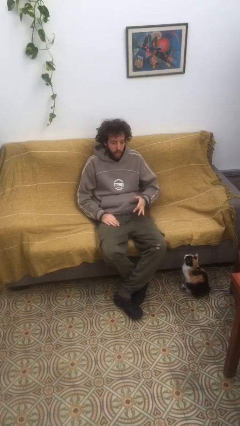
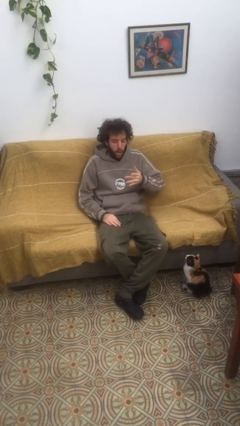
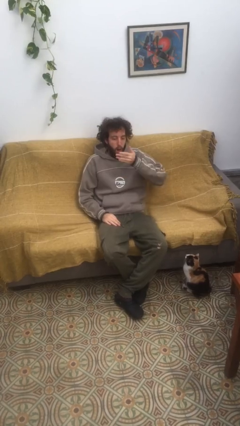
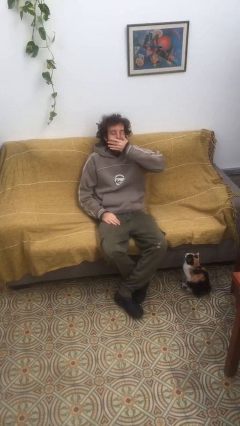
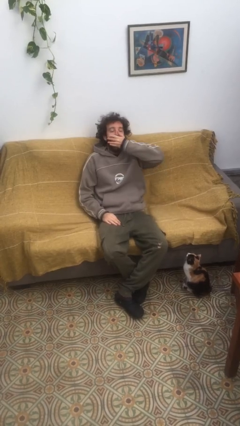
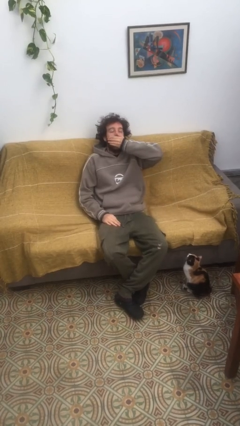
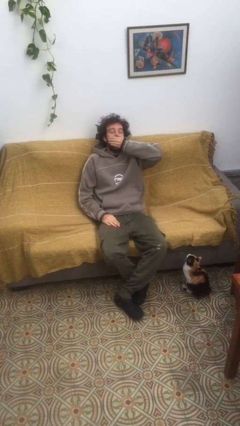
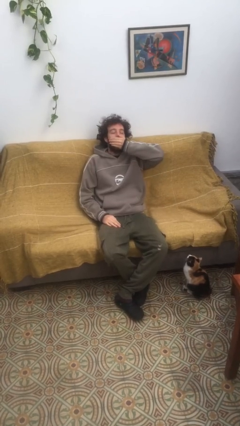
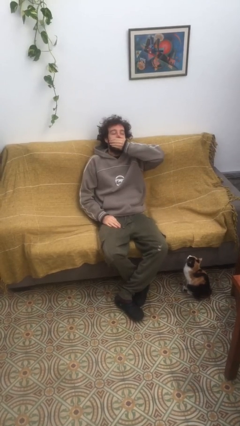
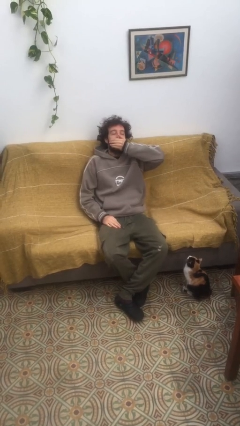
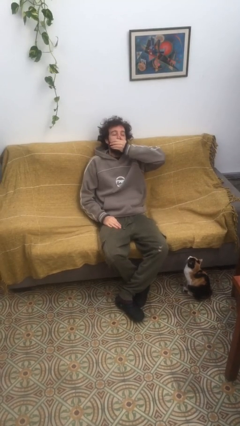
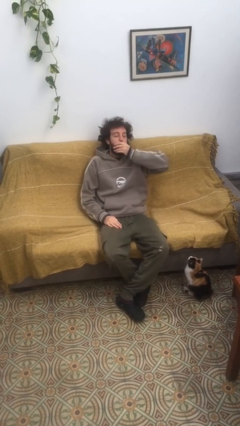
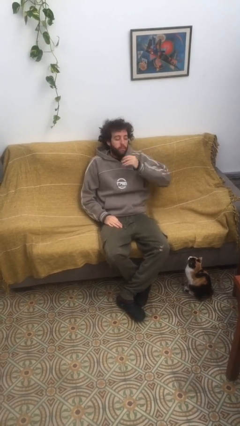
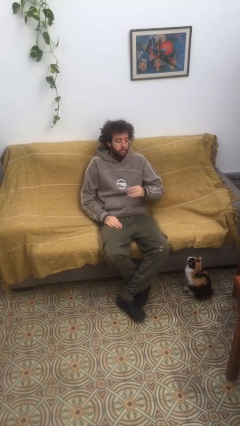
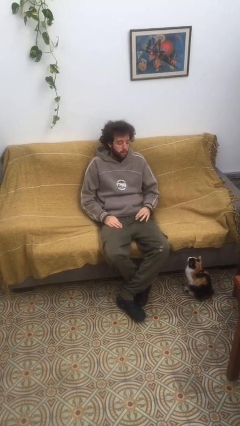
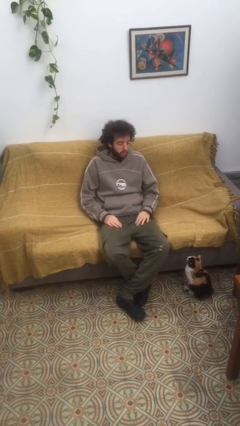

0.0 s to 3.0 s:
person yawns

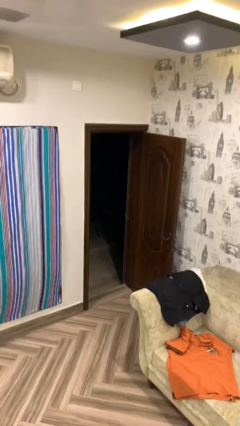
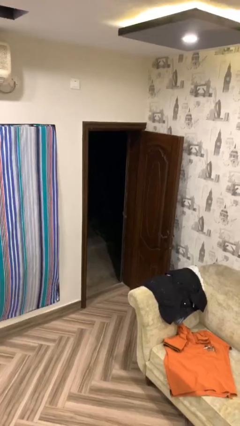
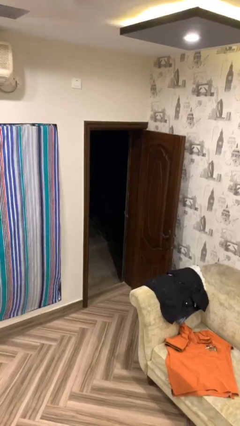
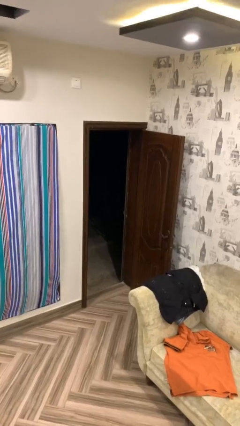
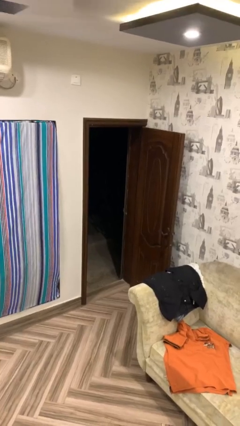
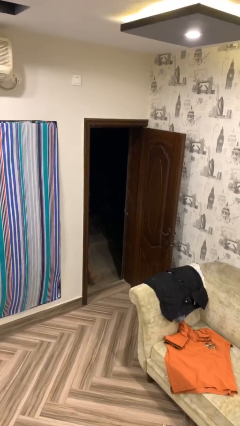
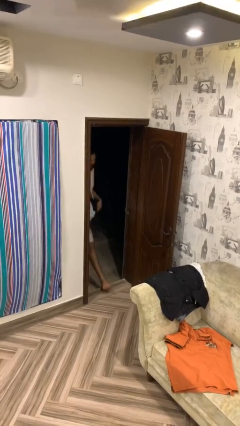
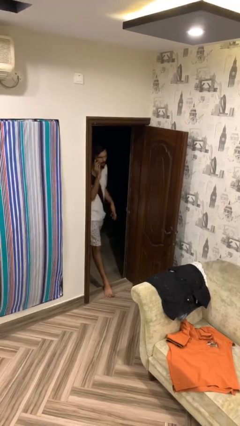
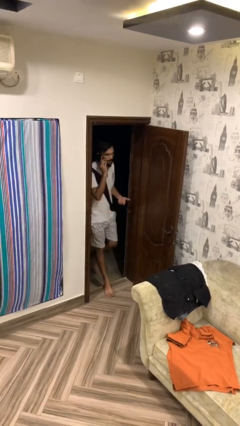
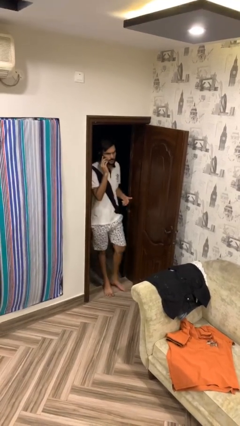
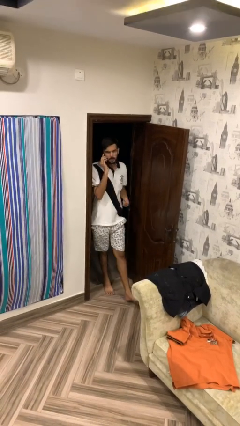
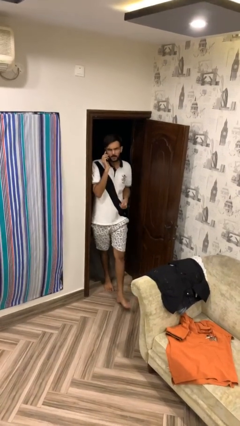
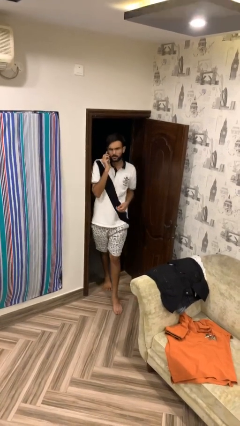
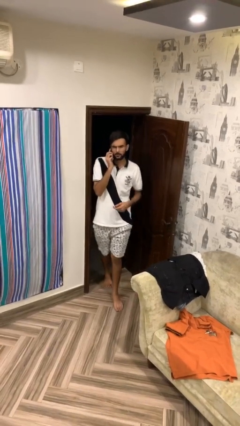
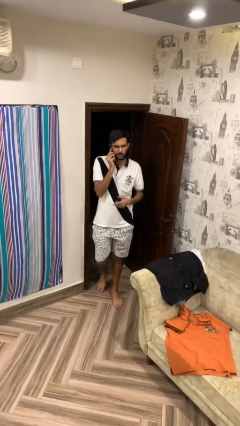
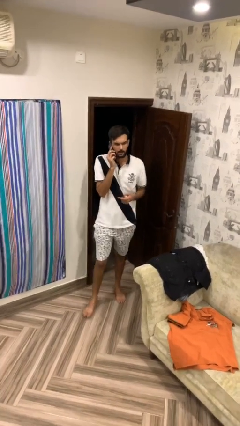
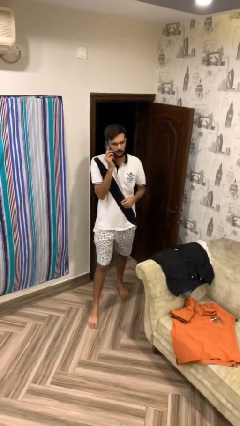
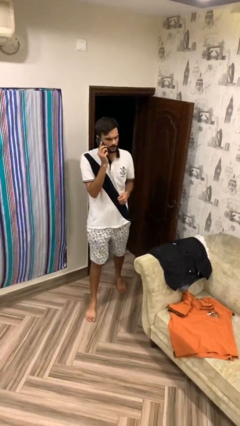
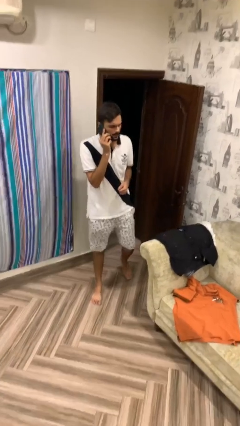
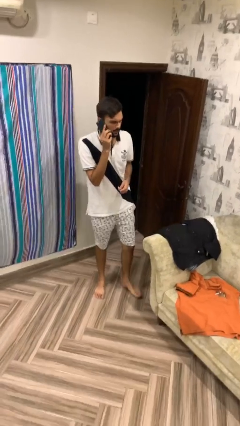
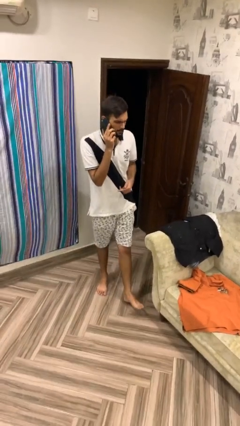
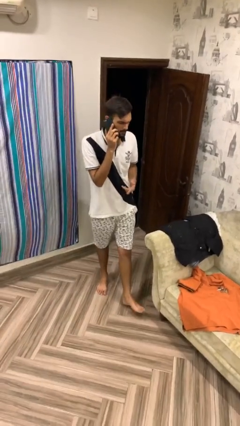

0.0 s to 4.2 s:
person enters scene through structure

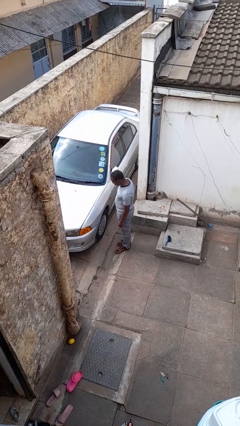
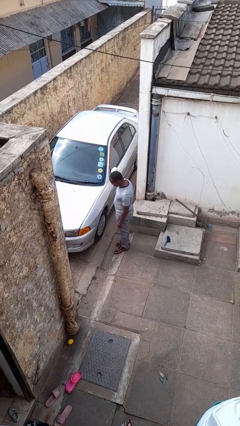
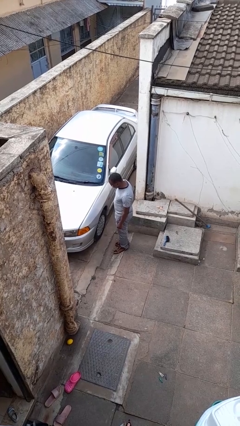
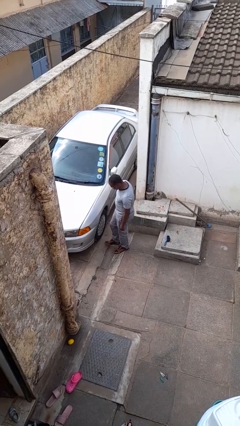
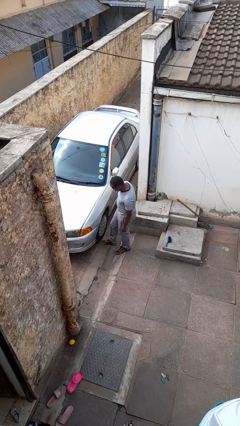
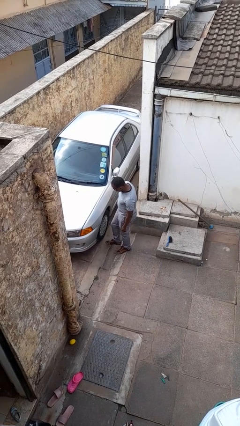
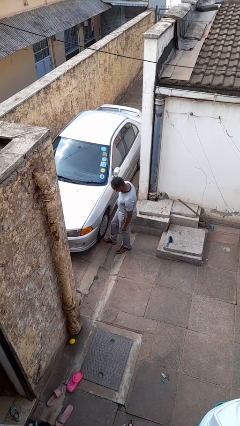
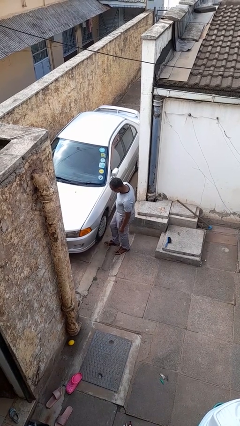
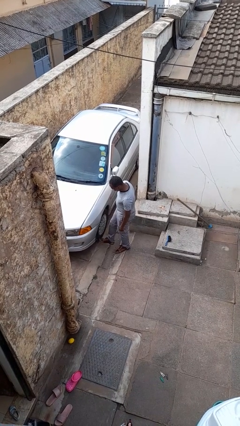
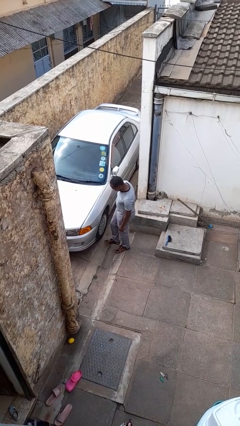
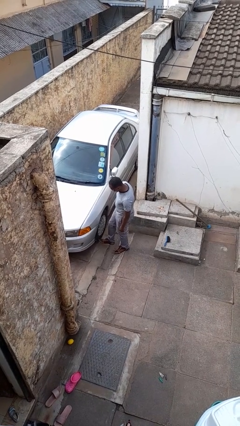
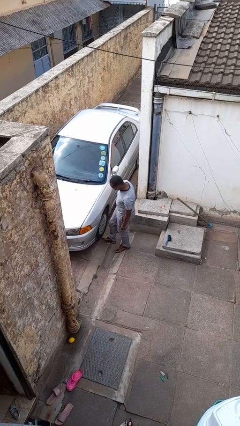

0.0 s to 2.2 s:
person kicks car tires

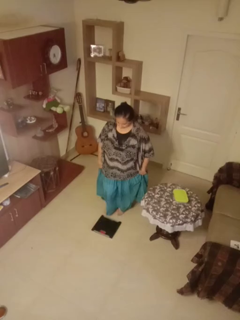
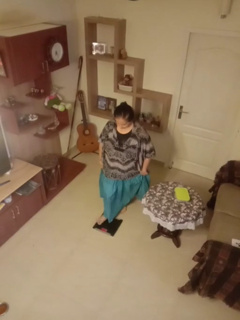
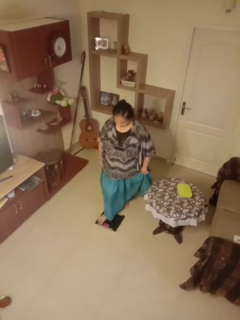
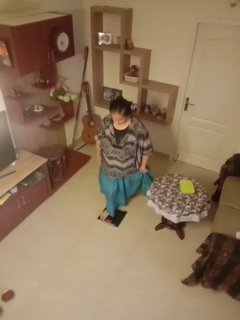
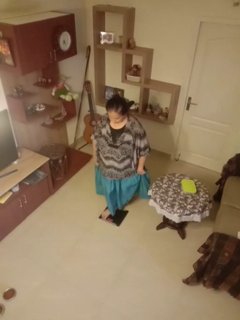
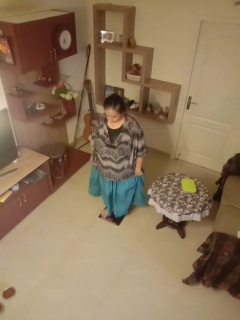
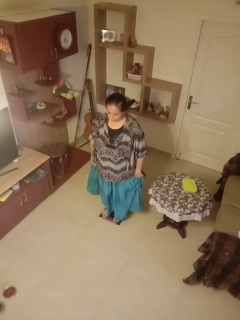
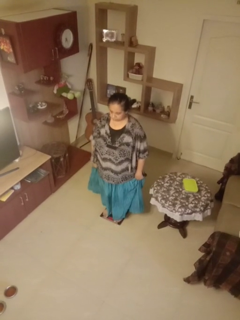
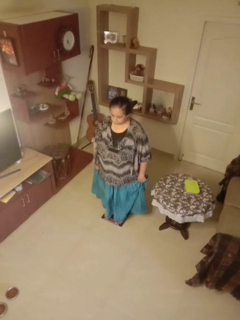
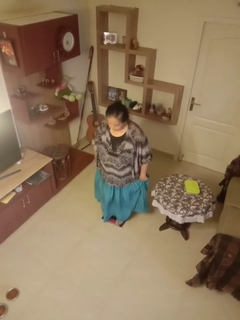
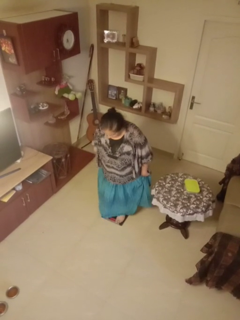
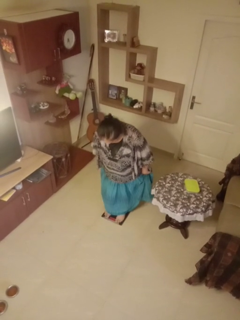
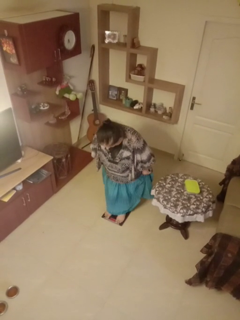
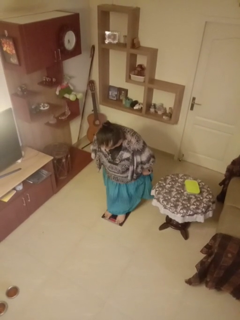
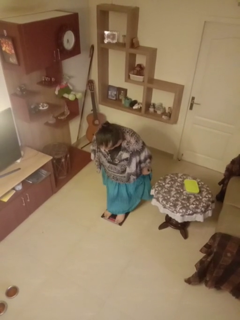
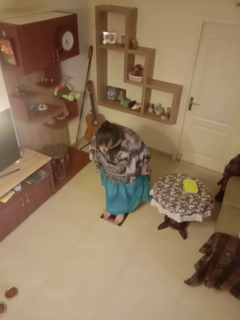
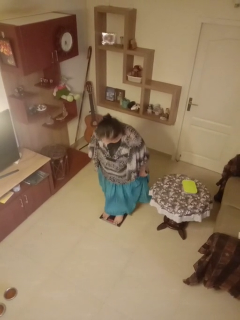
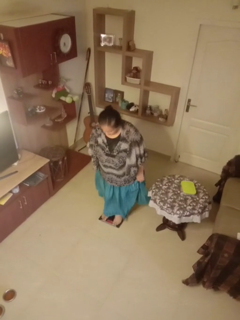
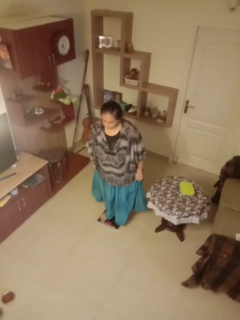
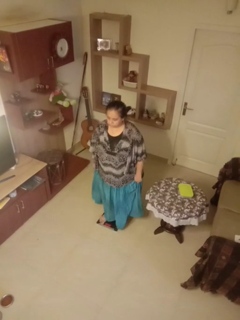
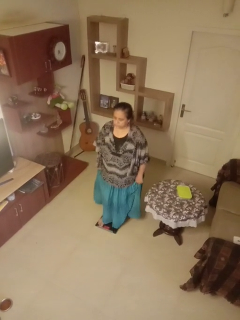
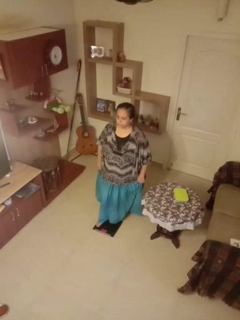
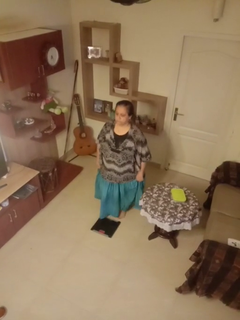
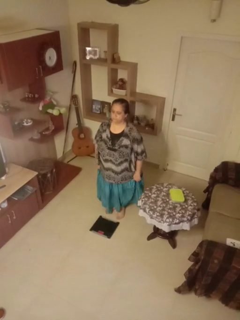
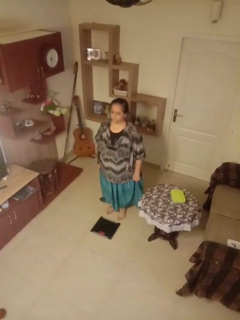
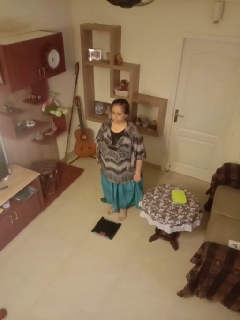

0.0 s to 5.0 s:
person uses bodyweight scale

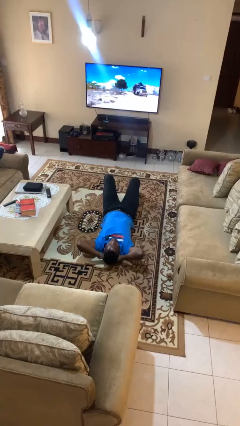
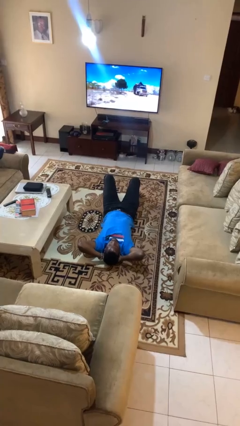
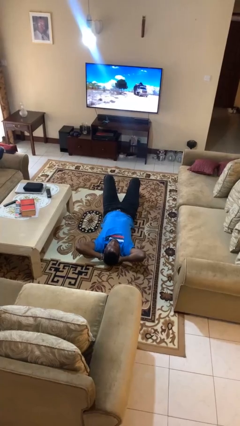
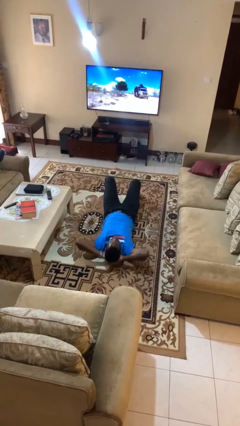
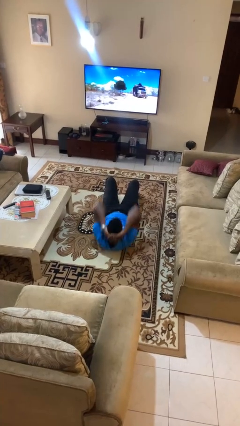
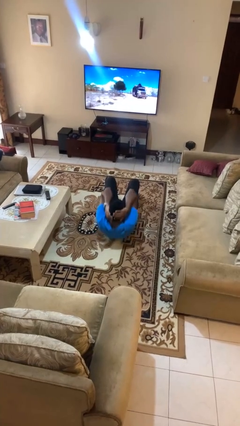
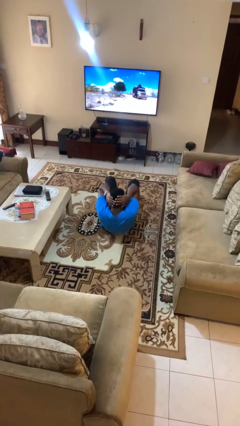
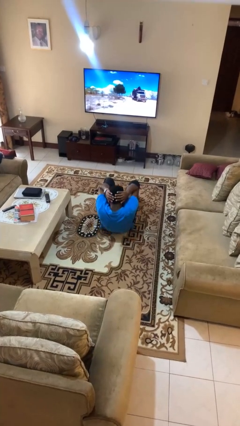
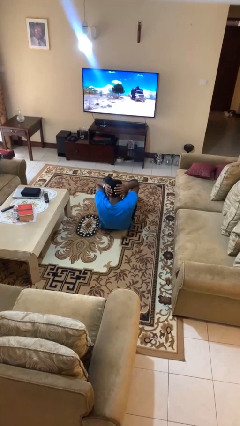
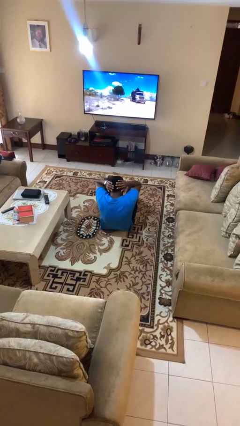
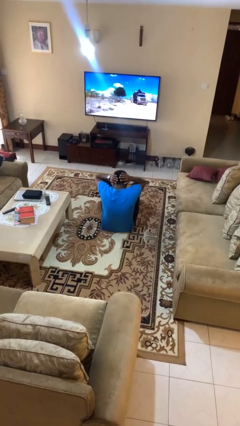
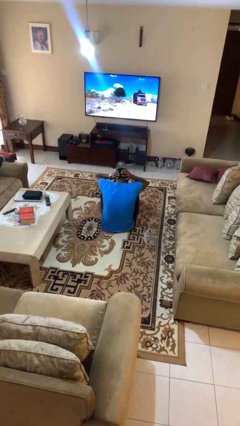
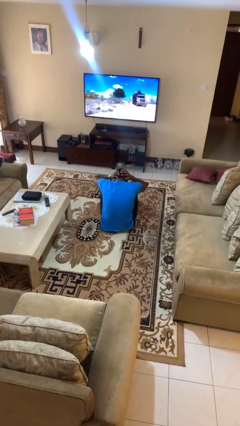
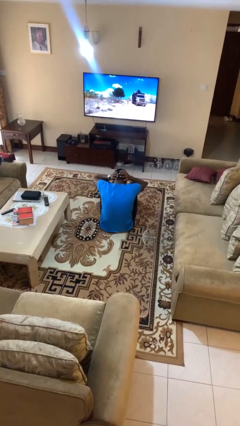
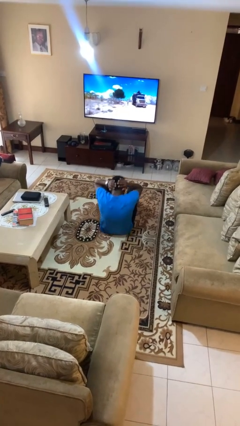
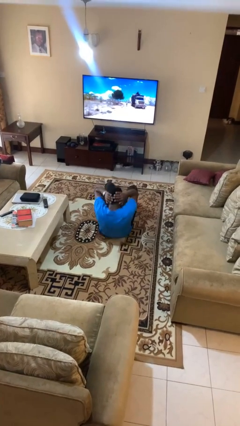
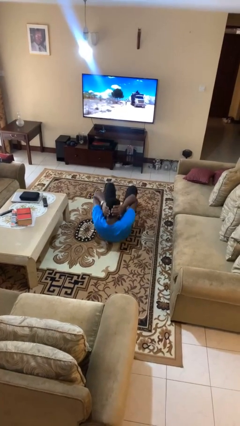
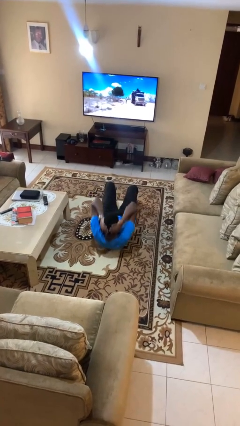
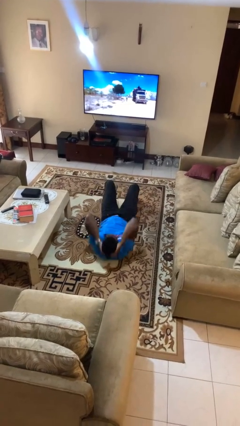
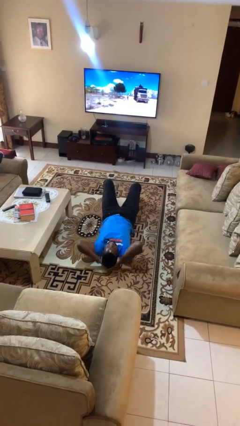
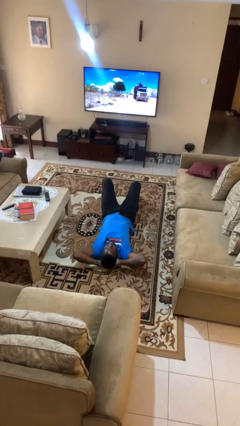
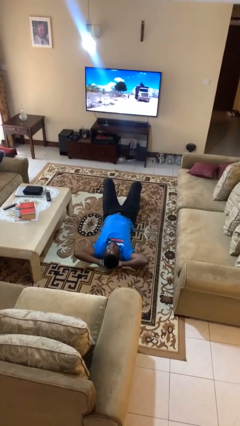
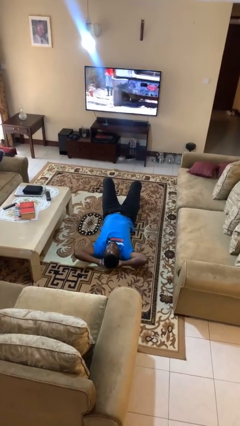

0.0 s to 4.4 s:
person exercises with situp

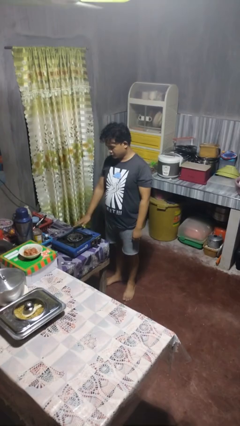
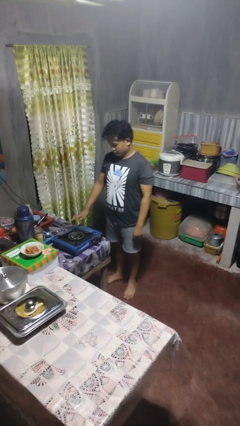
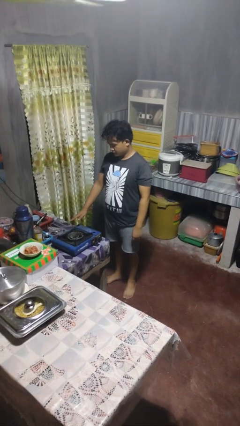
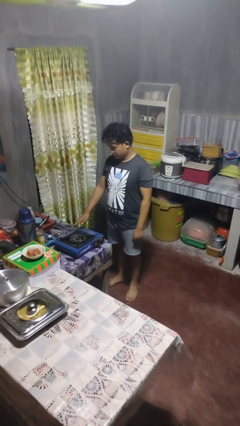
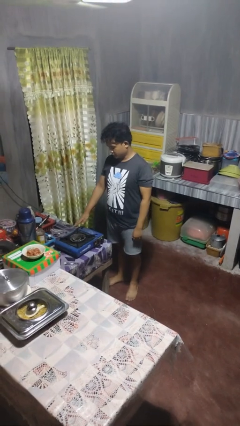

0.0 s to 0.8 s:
person burns hand
